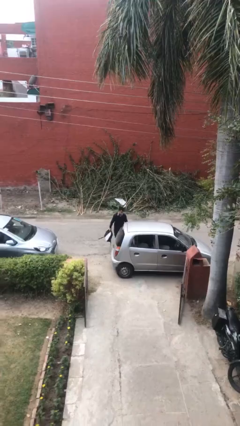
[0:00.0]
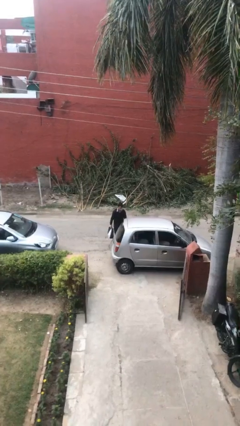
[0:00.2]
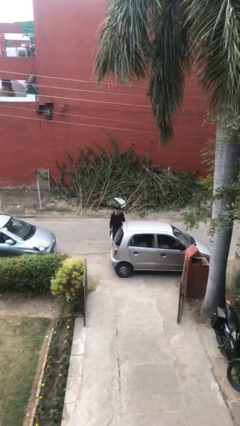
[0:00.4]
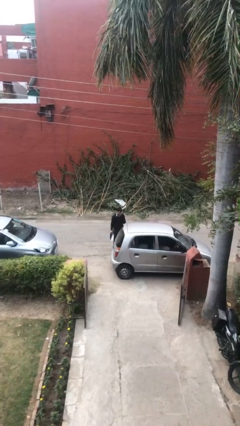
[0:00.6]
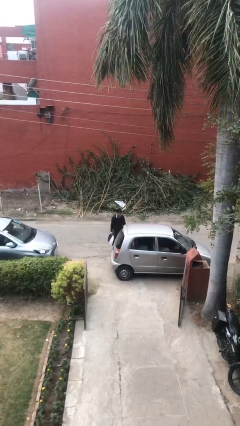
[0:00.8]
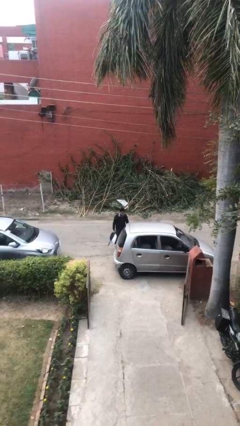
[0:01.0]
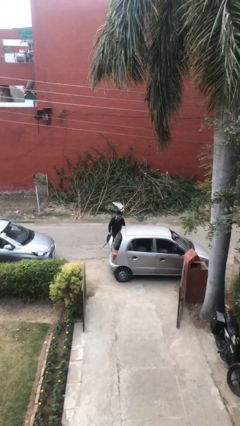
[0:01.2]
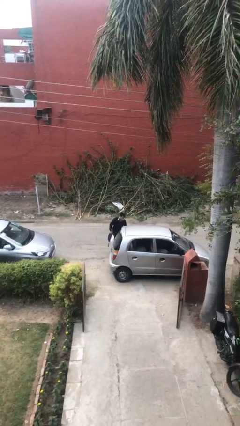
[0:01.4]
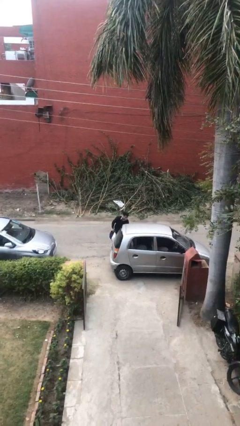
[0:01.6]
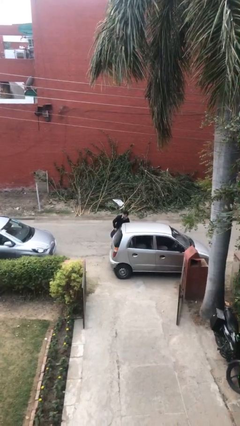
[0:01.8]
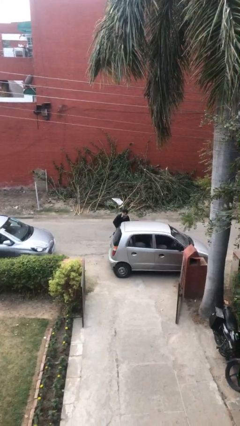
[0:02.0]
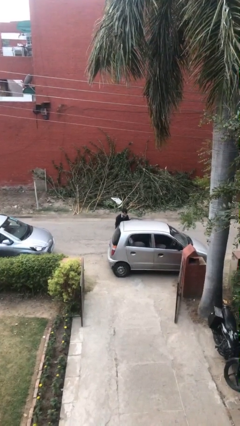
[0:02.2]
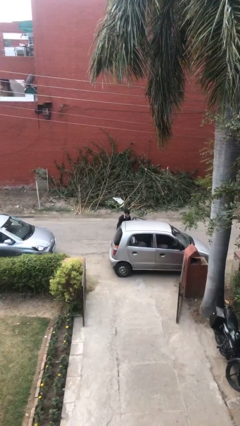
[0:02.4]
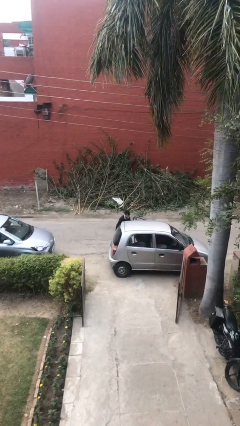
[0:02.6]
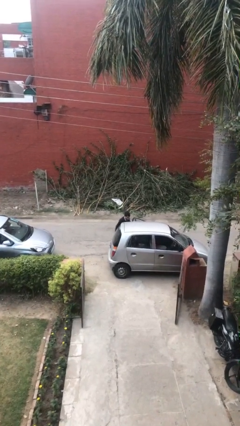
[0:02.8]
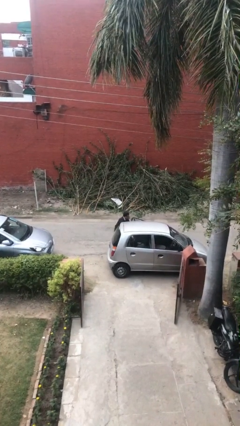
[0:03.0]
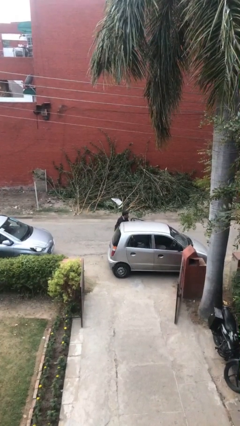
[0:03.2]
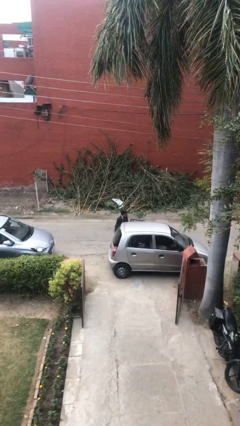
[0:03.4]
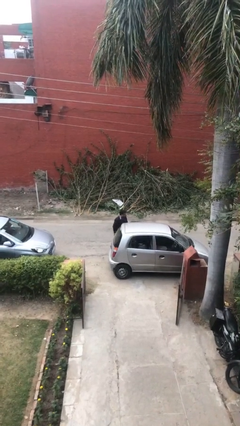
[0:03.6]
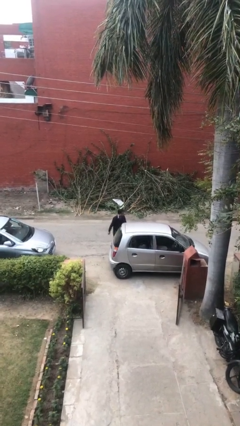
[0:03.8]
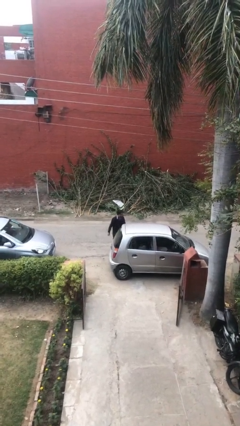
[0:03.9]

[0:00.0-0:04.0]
person loads car

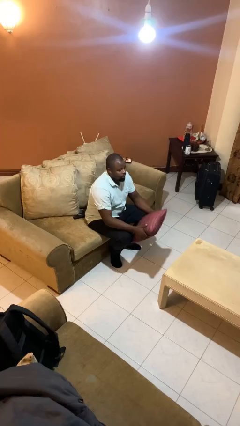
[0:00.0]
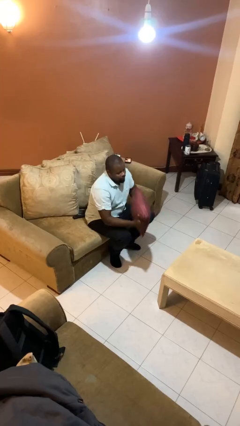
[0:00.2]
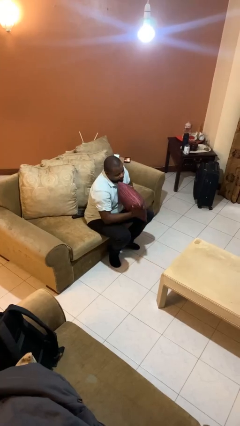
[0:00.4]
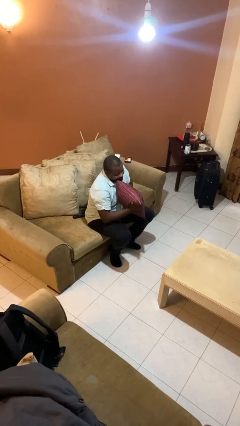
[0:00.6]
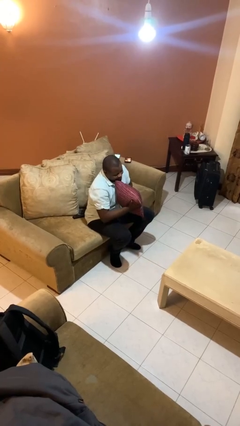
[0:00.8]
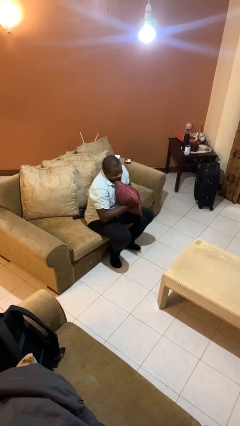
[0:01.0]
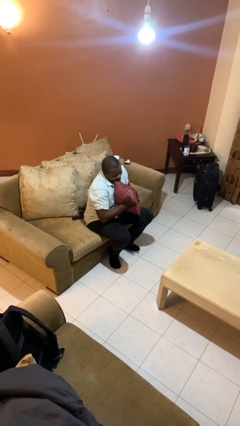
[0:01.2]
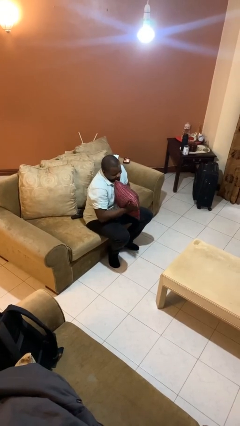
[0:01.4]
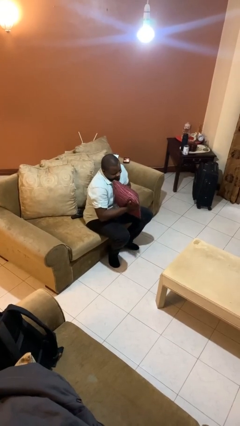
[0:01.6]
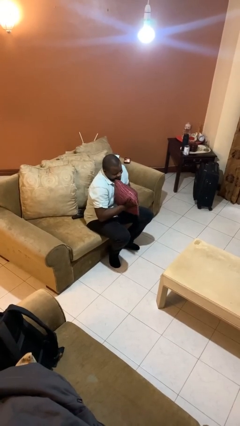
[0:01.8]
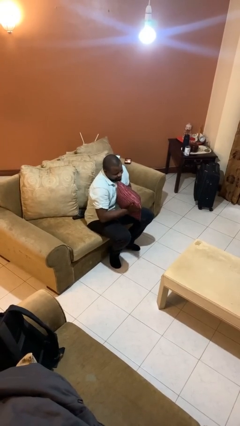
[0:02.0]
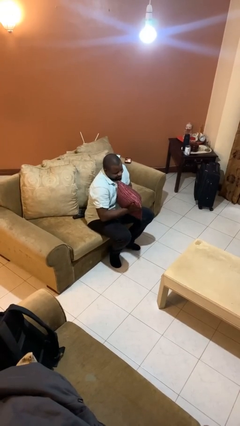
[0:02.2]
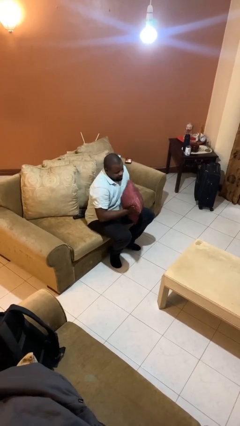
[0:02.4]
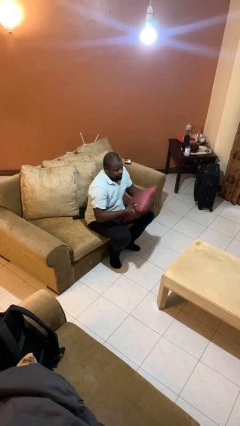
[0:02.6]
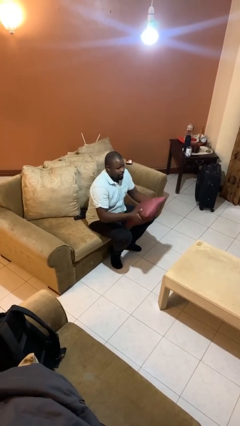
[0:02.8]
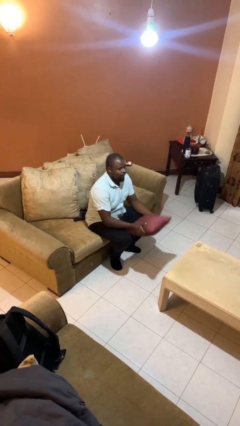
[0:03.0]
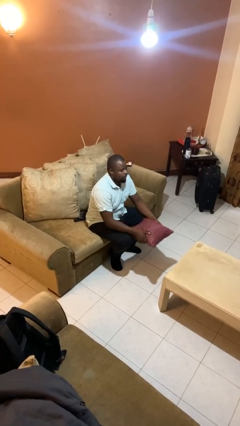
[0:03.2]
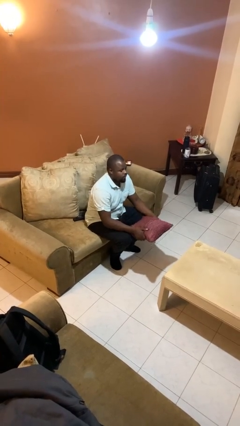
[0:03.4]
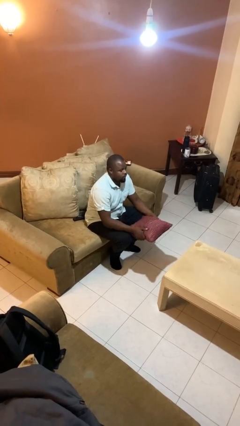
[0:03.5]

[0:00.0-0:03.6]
person squeezes object

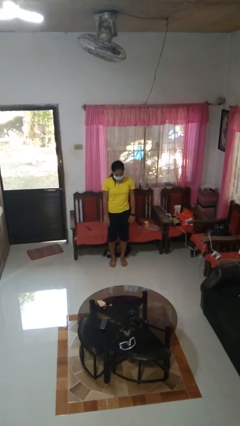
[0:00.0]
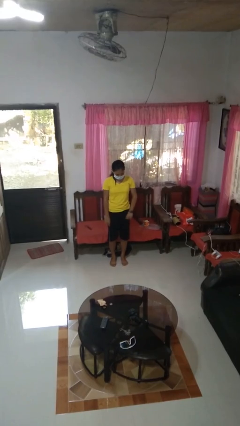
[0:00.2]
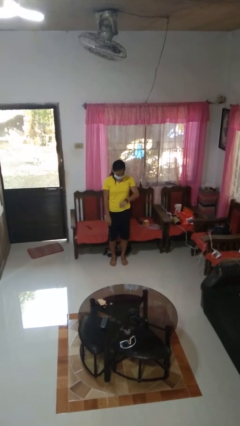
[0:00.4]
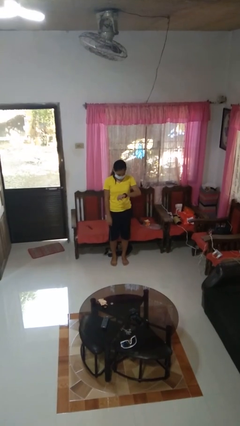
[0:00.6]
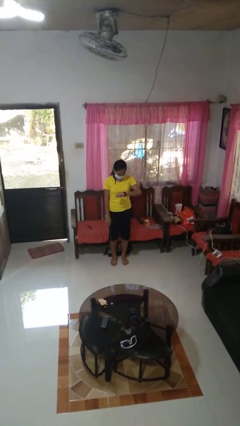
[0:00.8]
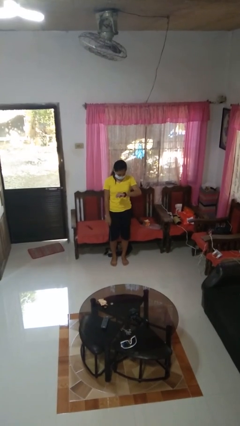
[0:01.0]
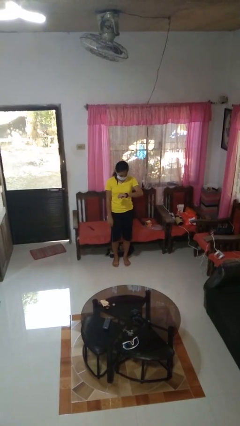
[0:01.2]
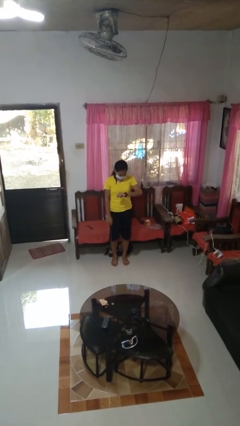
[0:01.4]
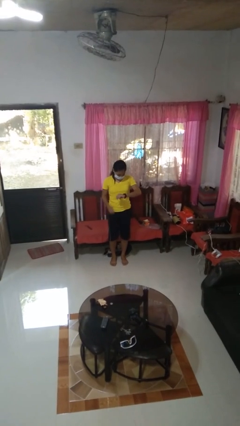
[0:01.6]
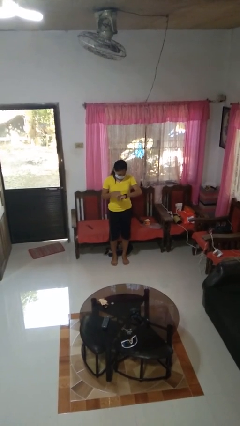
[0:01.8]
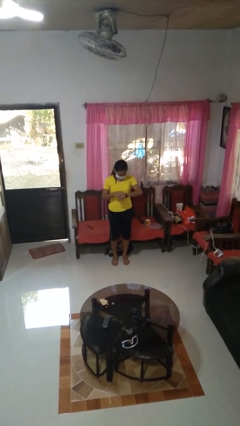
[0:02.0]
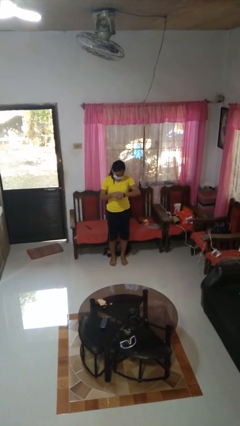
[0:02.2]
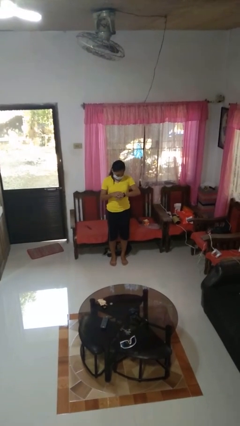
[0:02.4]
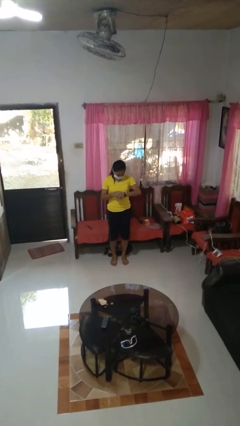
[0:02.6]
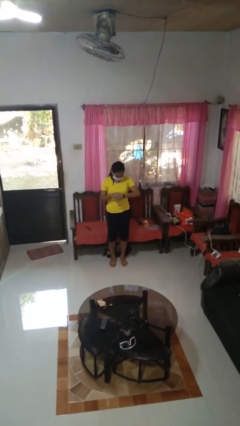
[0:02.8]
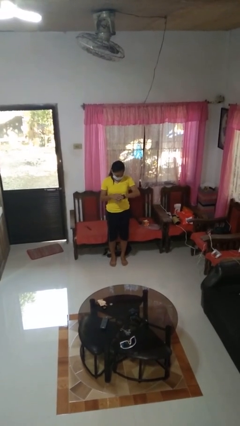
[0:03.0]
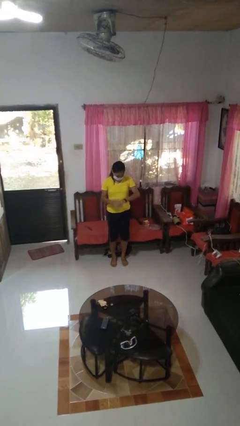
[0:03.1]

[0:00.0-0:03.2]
person looks at wristwatch

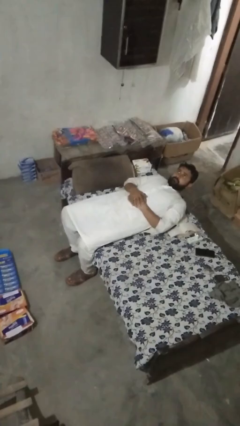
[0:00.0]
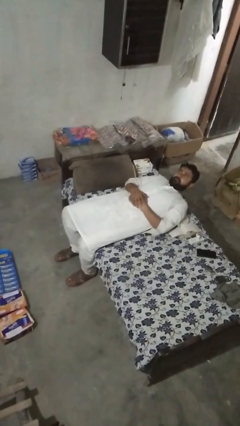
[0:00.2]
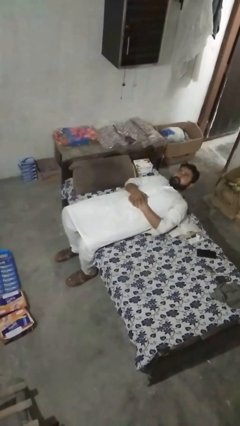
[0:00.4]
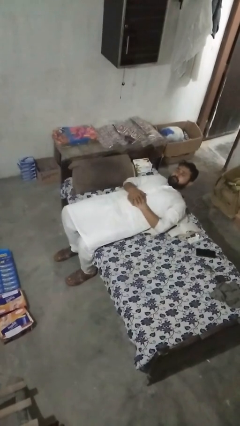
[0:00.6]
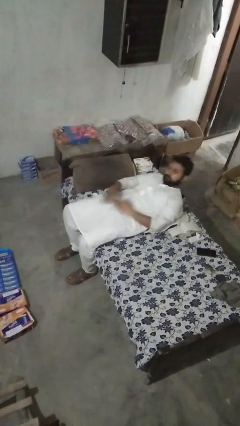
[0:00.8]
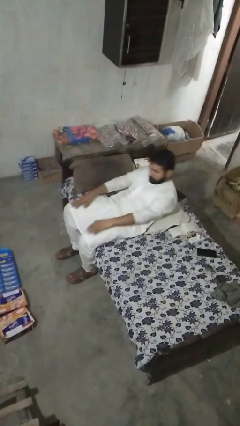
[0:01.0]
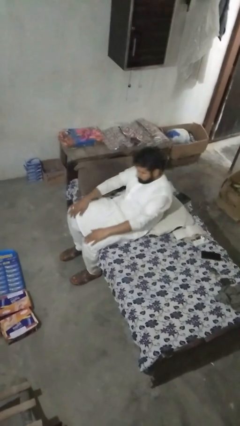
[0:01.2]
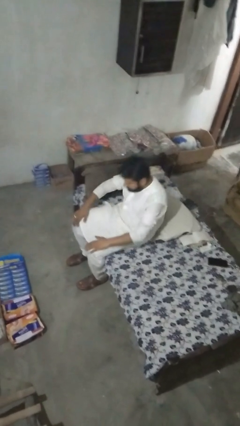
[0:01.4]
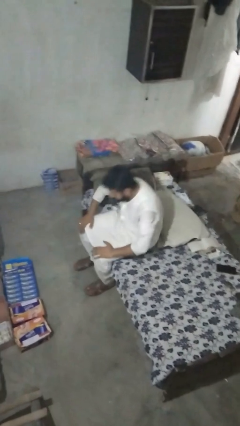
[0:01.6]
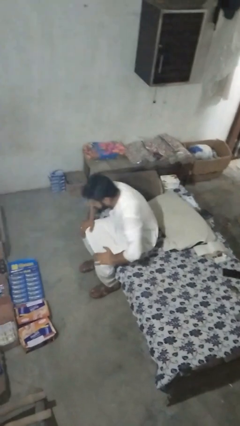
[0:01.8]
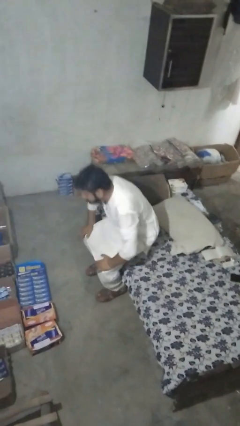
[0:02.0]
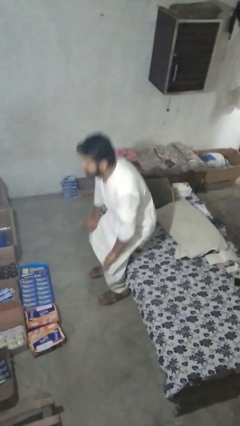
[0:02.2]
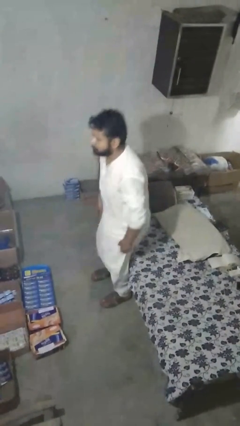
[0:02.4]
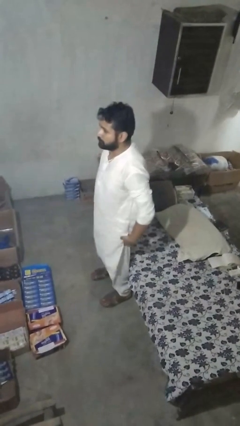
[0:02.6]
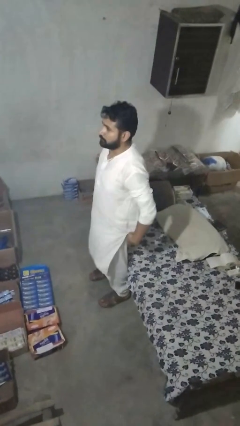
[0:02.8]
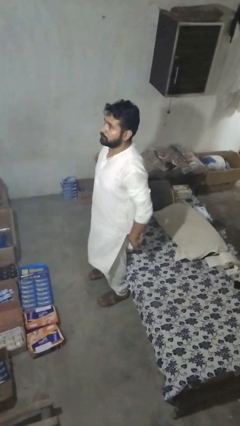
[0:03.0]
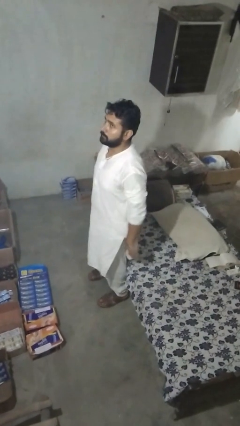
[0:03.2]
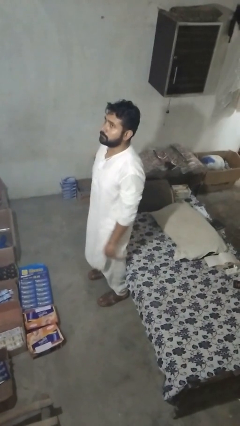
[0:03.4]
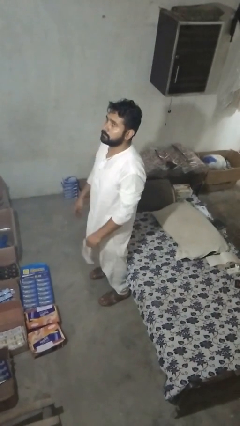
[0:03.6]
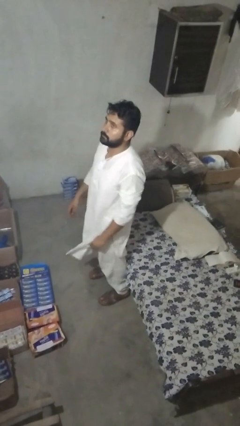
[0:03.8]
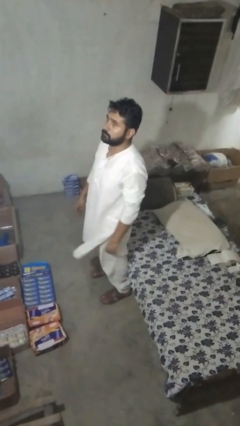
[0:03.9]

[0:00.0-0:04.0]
person stands up

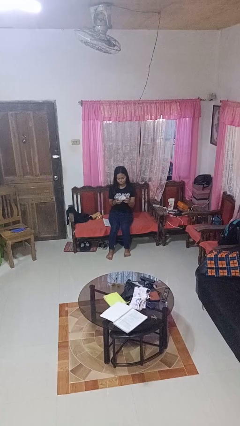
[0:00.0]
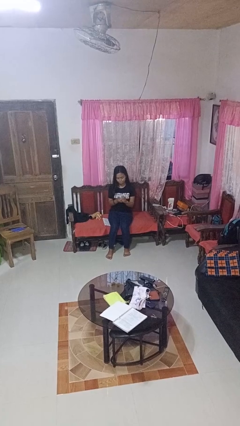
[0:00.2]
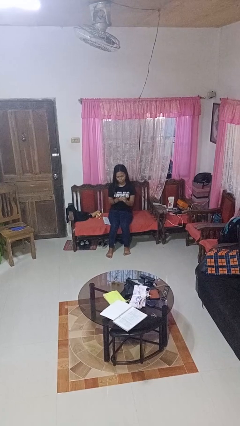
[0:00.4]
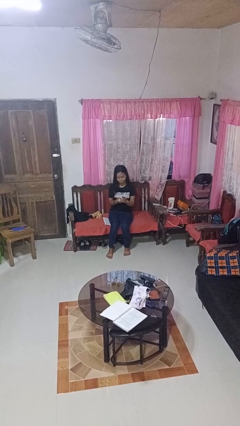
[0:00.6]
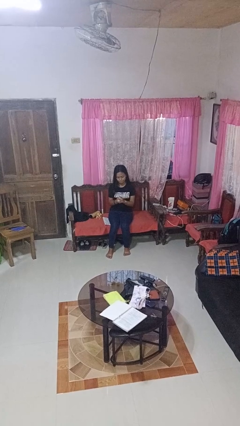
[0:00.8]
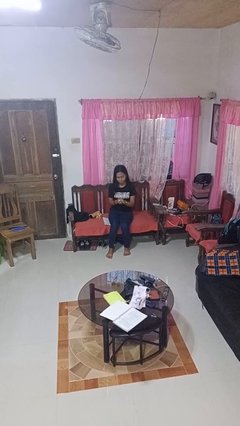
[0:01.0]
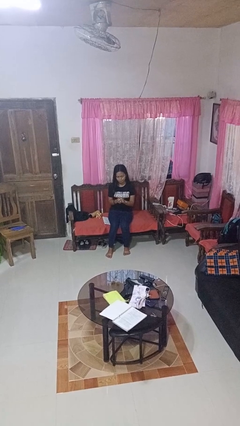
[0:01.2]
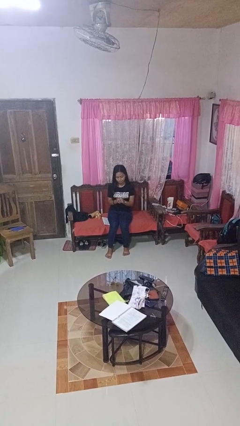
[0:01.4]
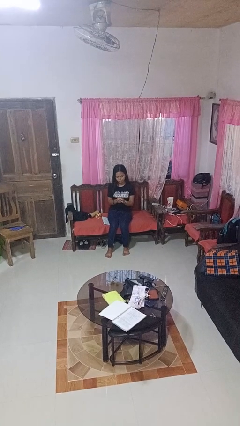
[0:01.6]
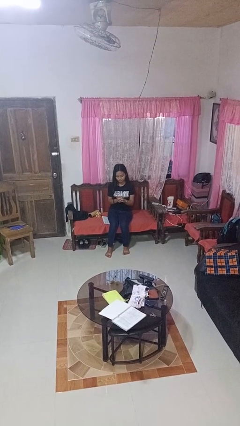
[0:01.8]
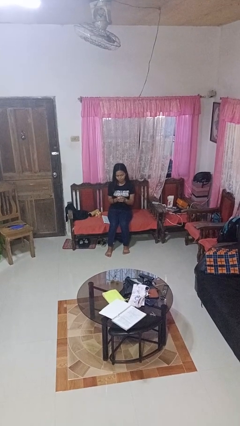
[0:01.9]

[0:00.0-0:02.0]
person crumples paper

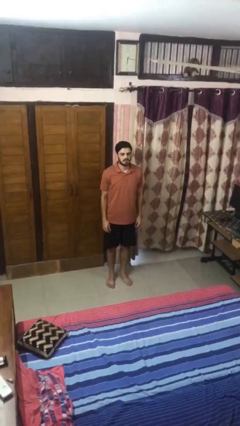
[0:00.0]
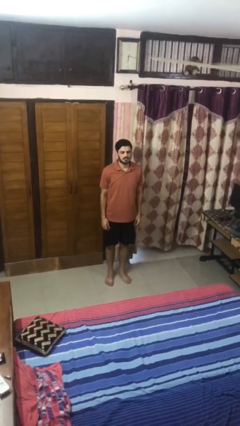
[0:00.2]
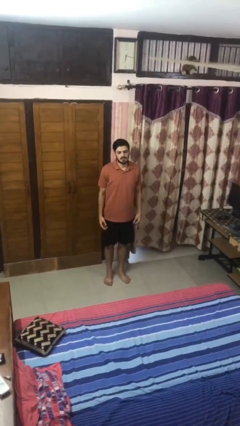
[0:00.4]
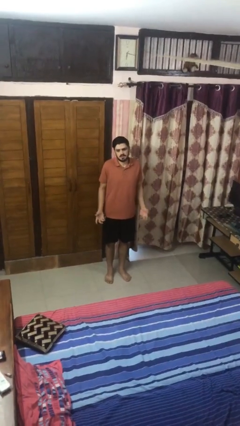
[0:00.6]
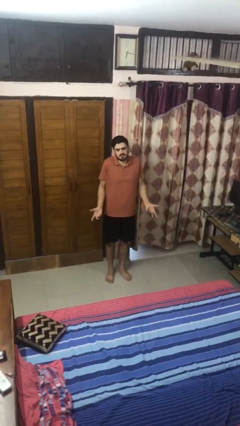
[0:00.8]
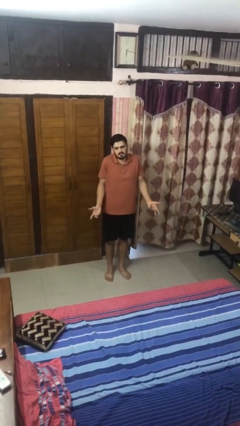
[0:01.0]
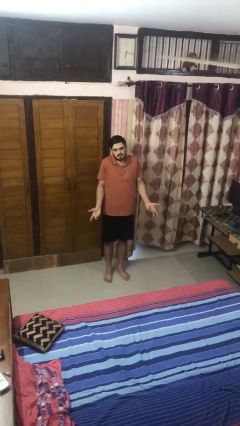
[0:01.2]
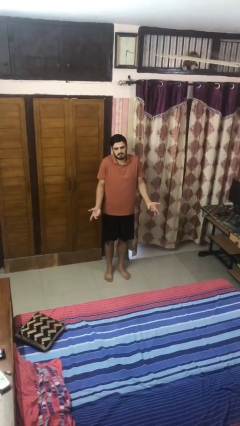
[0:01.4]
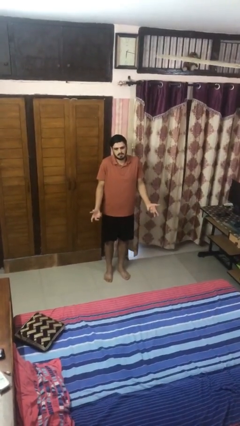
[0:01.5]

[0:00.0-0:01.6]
person shrugs
